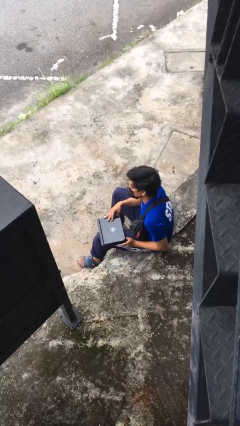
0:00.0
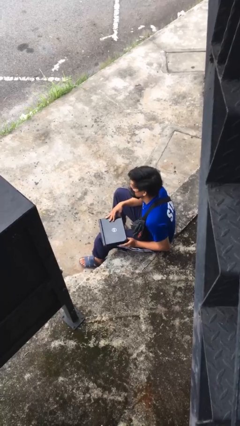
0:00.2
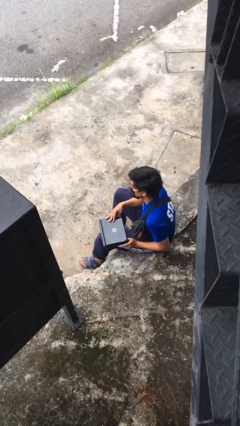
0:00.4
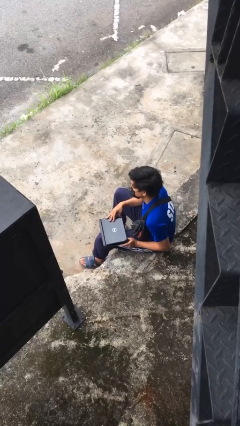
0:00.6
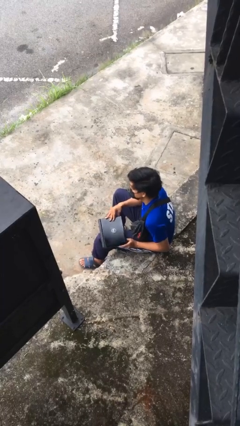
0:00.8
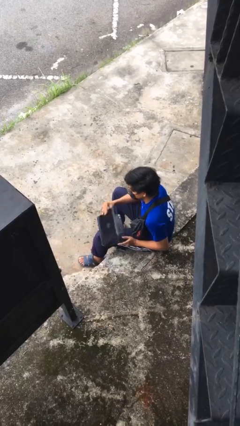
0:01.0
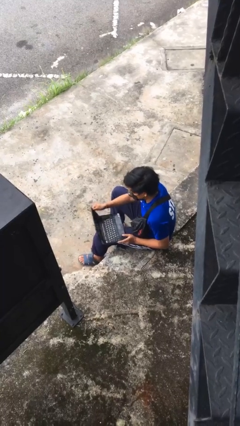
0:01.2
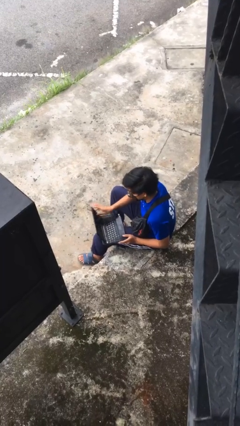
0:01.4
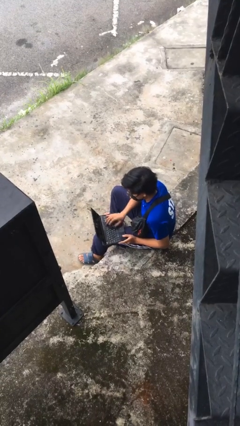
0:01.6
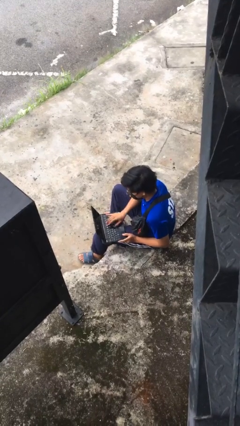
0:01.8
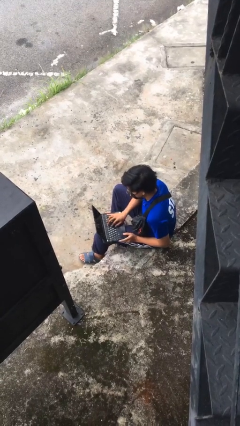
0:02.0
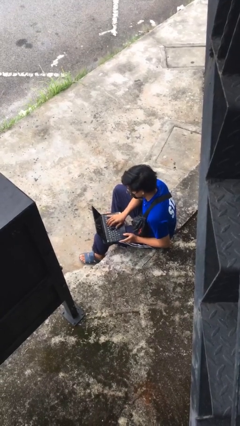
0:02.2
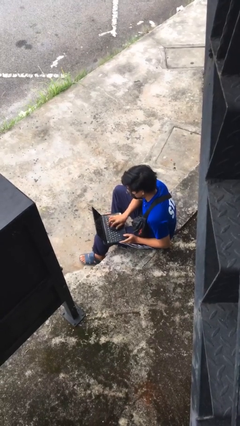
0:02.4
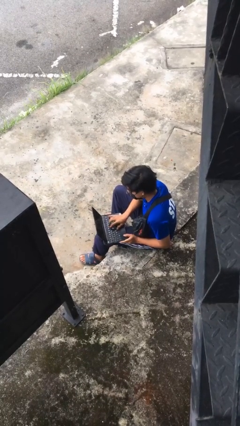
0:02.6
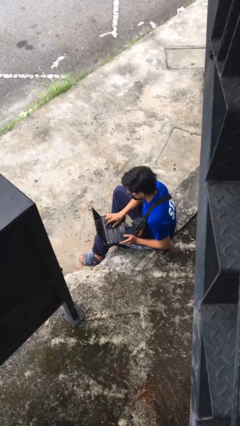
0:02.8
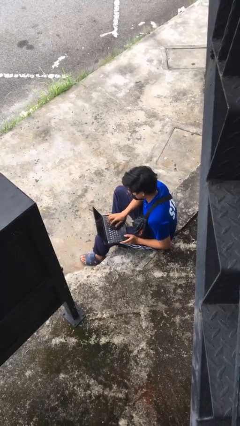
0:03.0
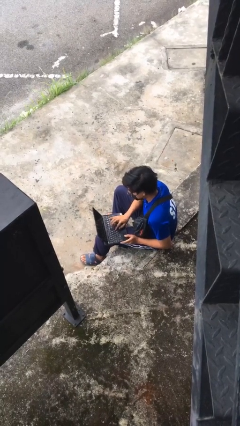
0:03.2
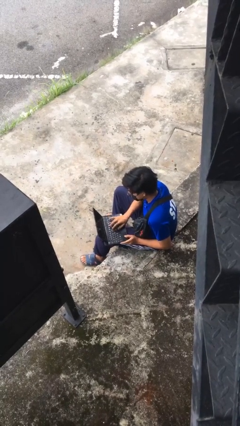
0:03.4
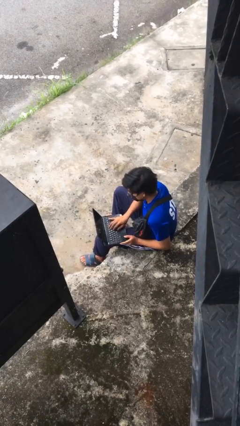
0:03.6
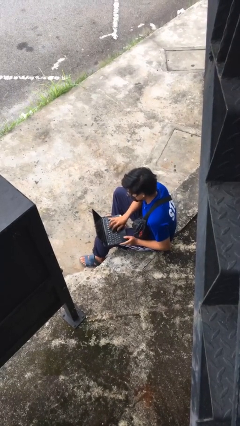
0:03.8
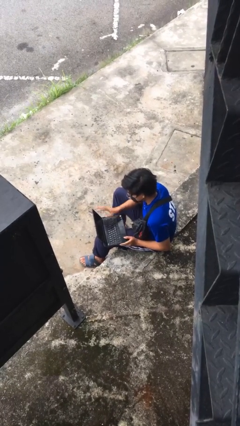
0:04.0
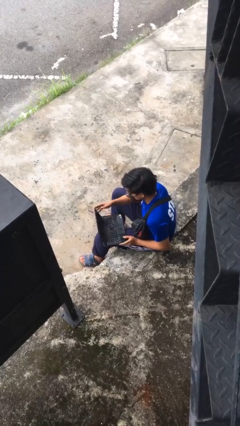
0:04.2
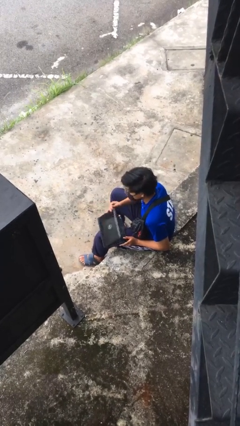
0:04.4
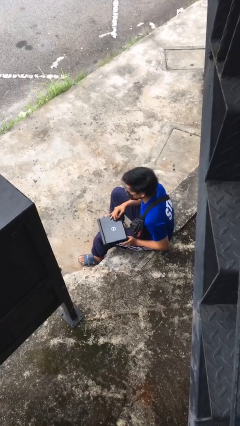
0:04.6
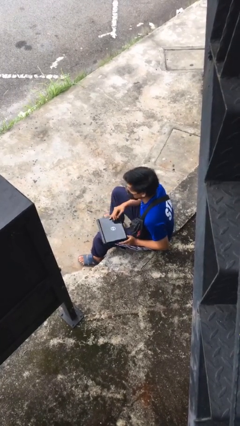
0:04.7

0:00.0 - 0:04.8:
person interacts with laptop

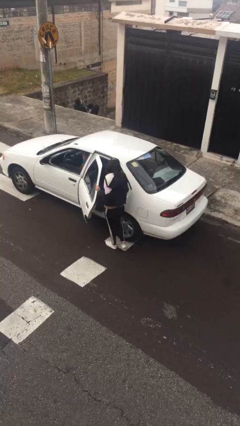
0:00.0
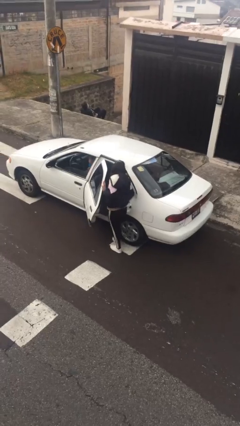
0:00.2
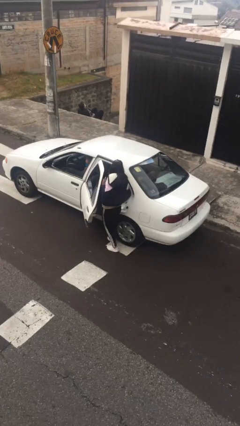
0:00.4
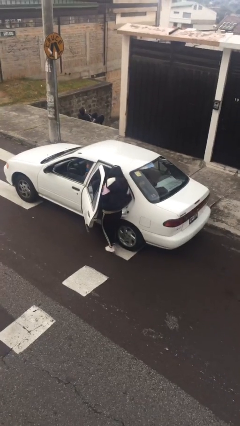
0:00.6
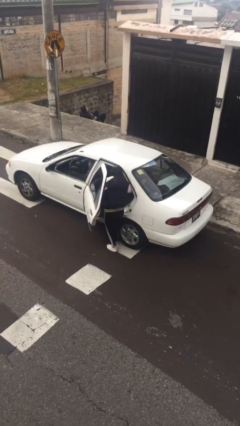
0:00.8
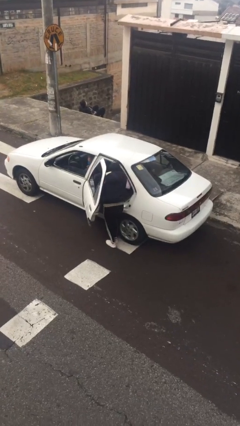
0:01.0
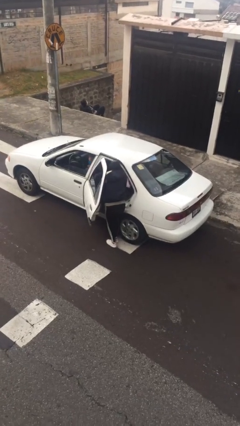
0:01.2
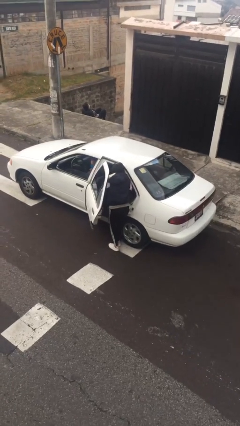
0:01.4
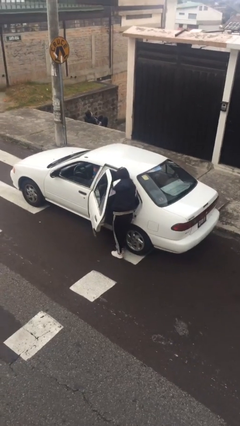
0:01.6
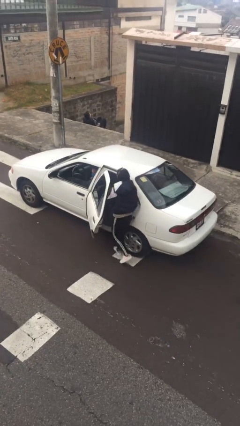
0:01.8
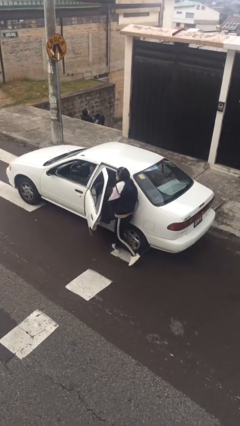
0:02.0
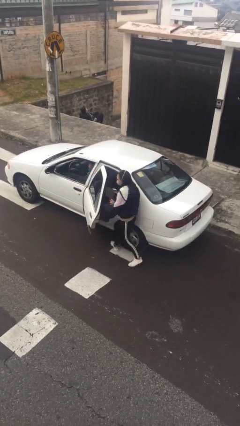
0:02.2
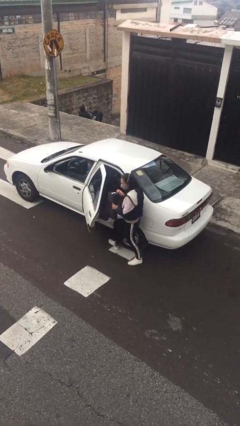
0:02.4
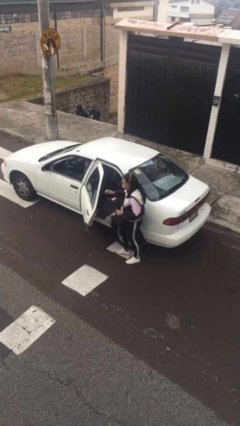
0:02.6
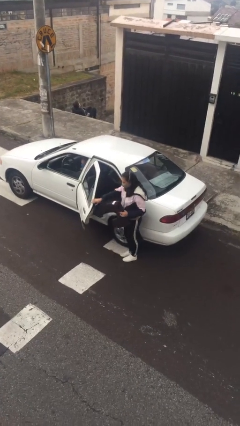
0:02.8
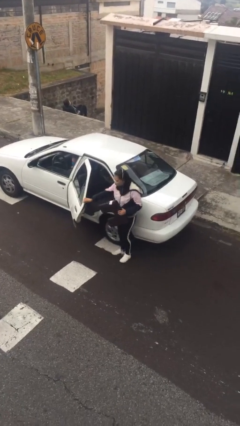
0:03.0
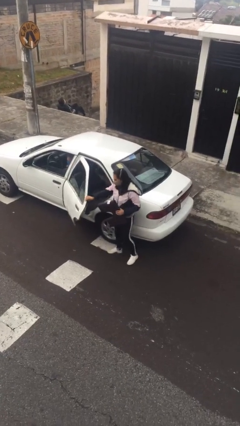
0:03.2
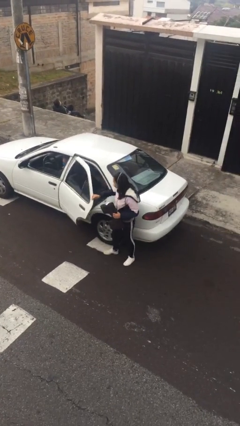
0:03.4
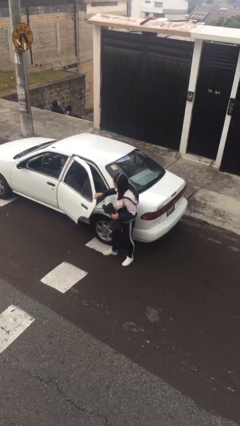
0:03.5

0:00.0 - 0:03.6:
person unloads car

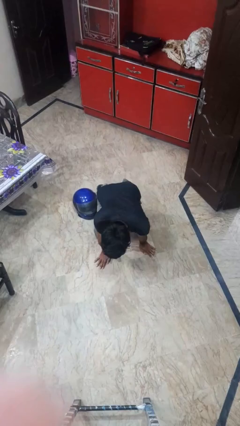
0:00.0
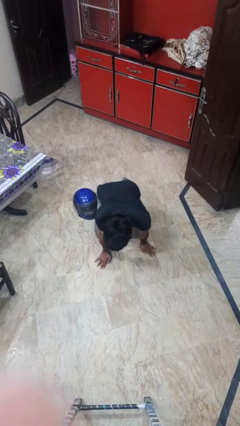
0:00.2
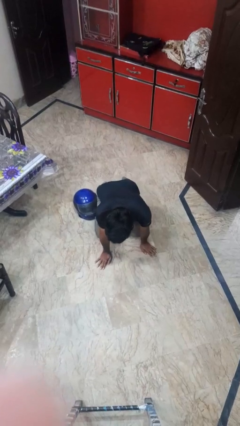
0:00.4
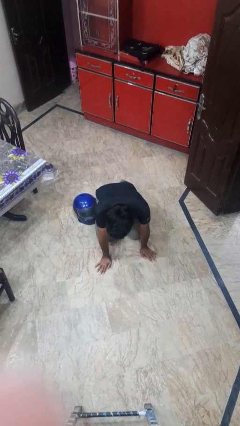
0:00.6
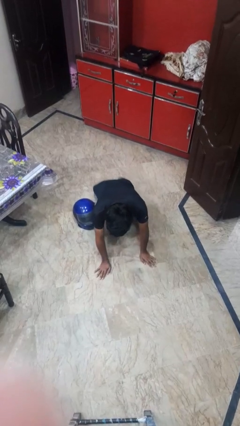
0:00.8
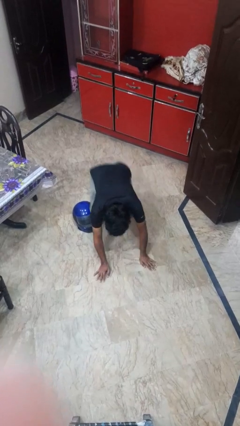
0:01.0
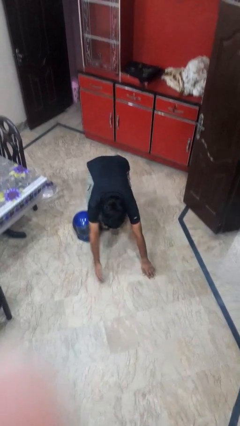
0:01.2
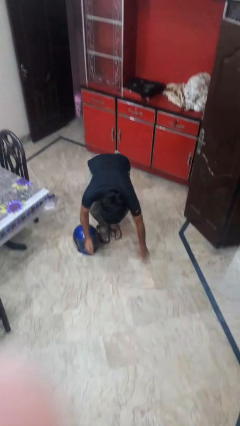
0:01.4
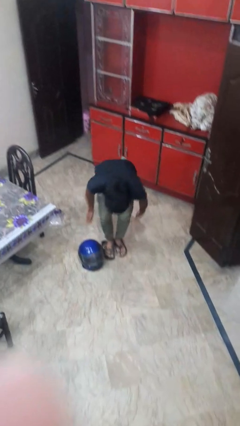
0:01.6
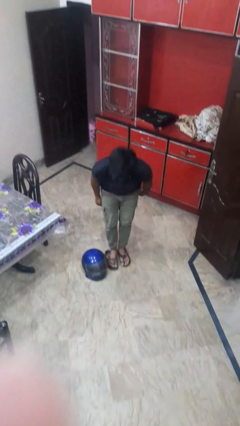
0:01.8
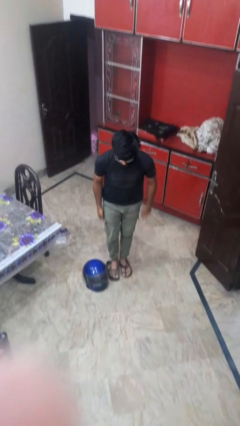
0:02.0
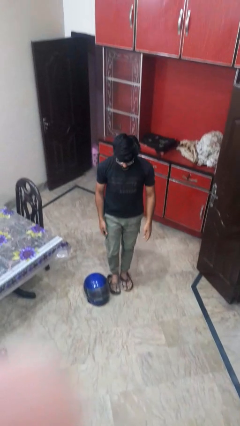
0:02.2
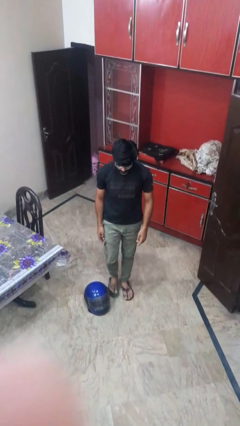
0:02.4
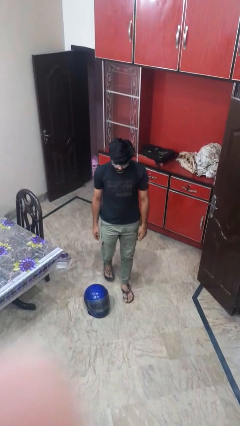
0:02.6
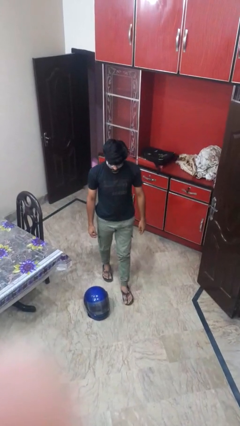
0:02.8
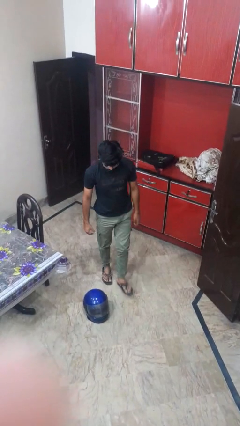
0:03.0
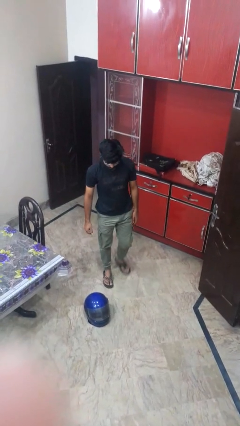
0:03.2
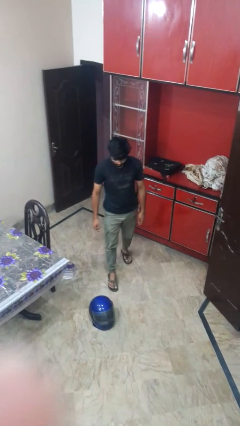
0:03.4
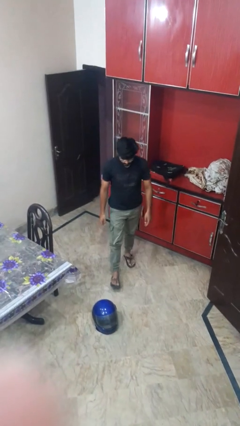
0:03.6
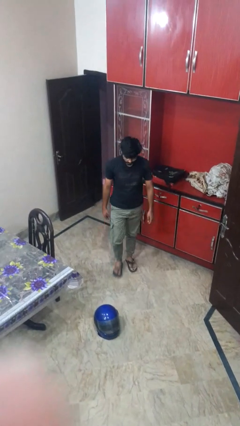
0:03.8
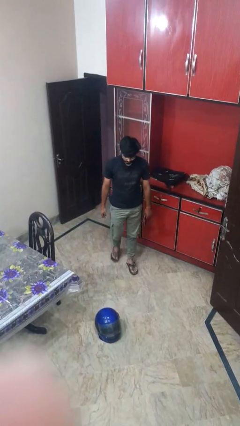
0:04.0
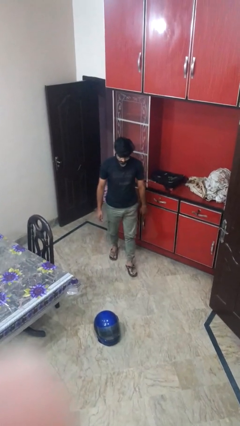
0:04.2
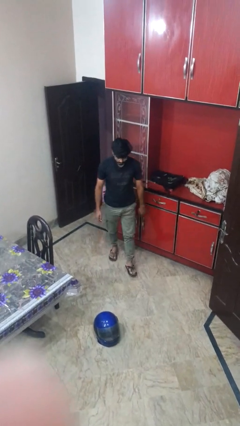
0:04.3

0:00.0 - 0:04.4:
person stands up from floor

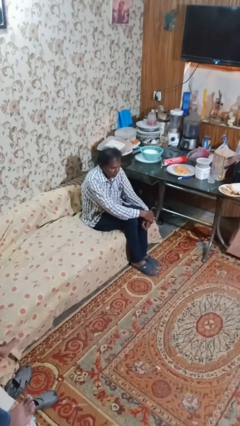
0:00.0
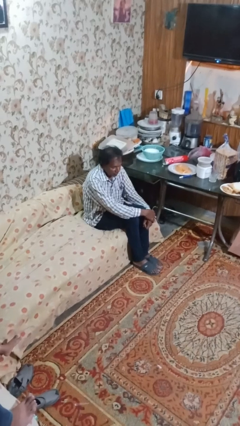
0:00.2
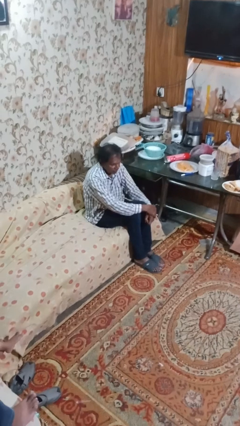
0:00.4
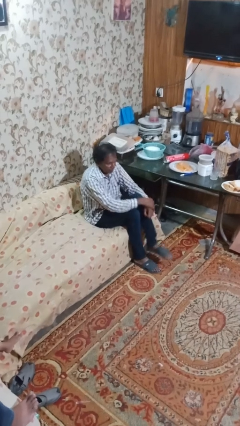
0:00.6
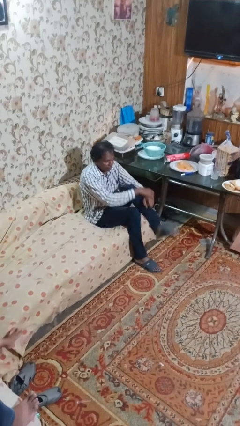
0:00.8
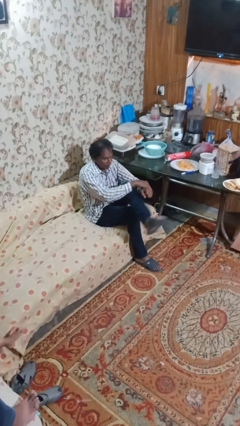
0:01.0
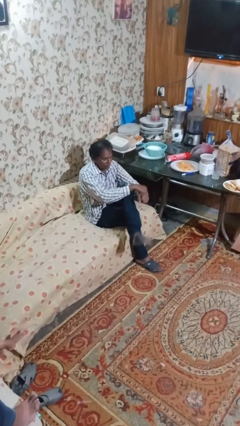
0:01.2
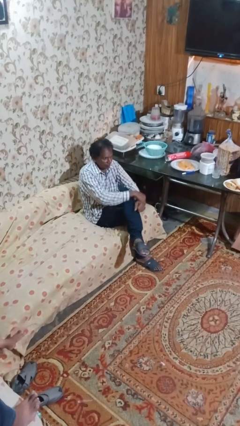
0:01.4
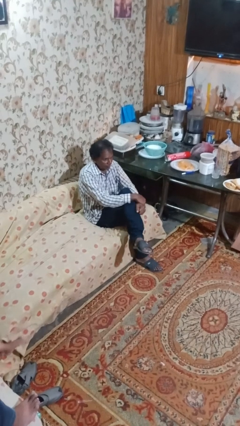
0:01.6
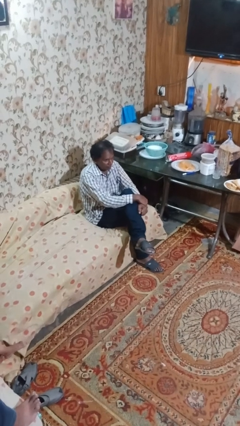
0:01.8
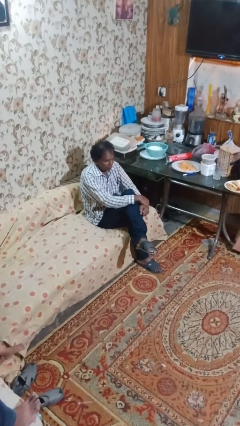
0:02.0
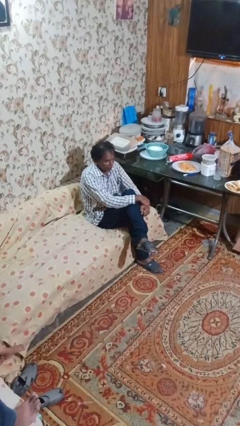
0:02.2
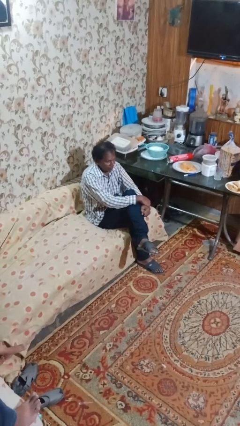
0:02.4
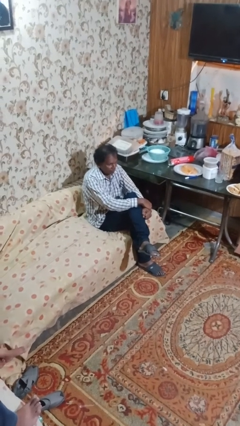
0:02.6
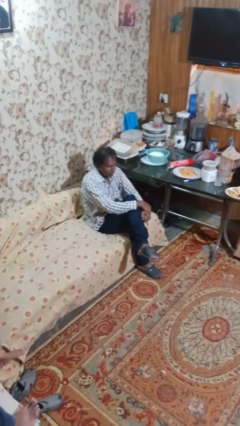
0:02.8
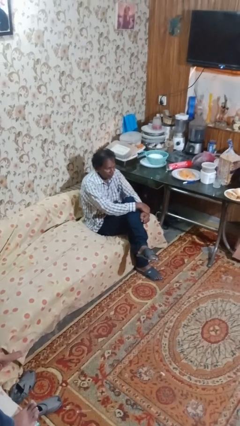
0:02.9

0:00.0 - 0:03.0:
person crosses legs

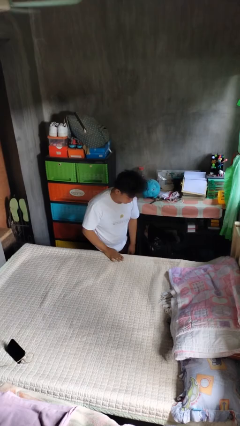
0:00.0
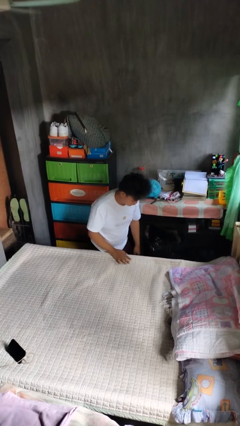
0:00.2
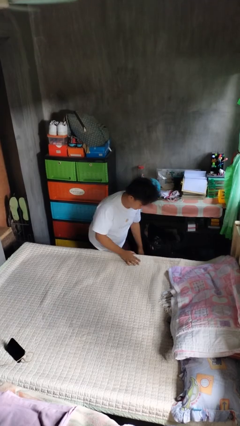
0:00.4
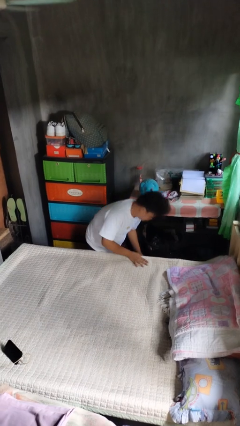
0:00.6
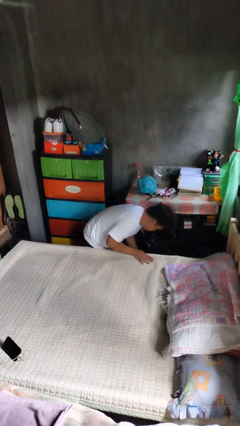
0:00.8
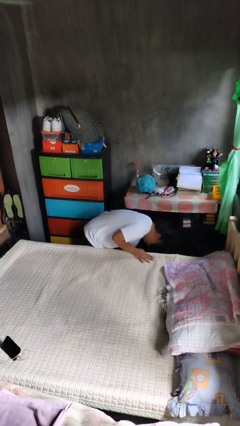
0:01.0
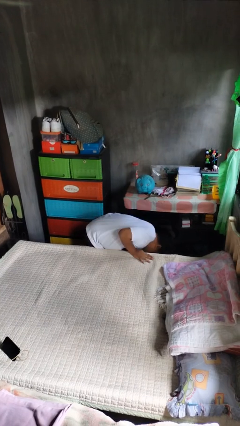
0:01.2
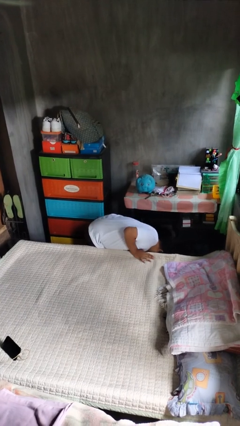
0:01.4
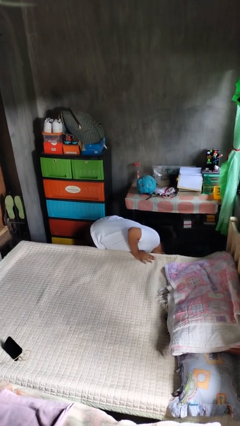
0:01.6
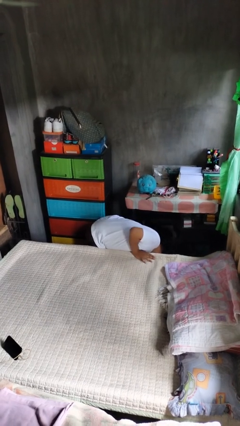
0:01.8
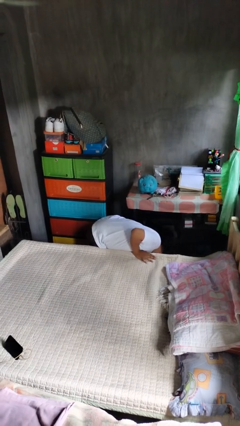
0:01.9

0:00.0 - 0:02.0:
person searches under bed
